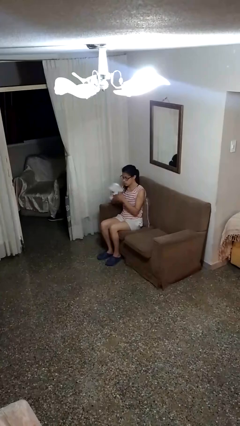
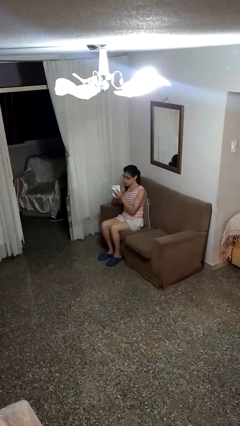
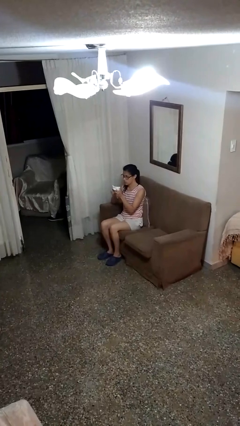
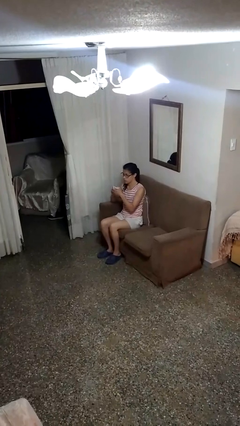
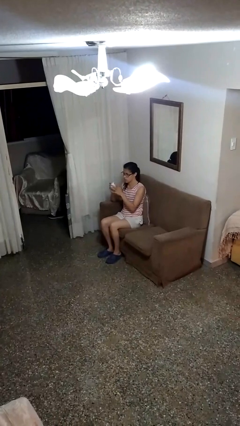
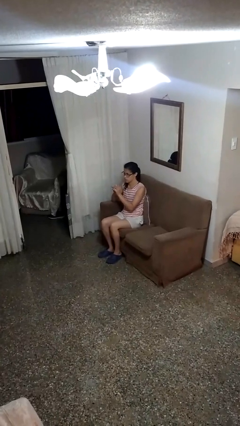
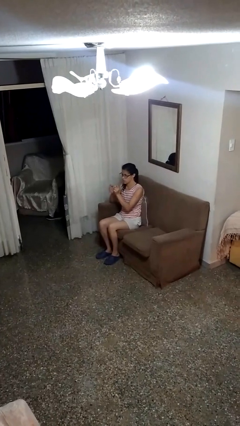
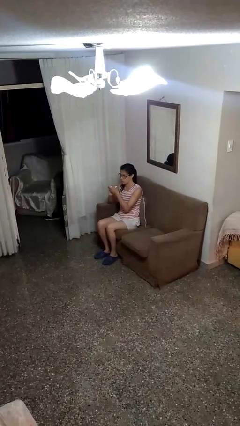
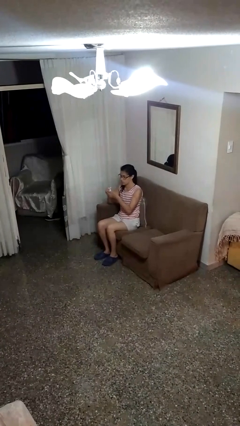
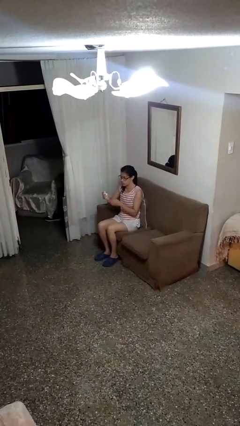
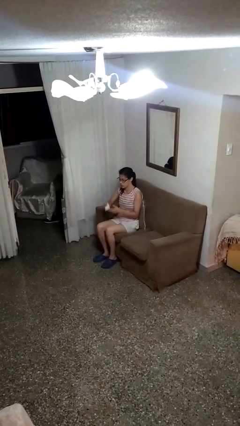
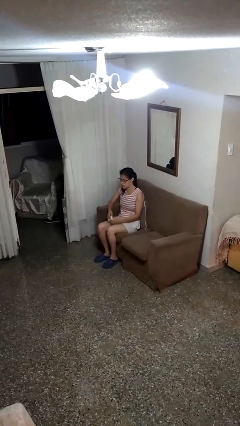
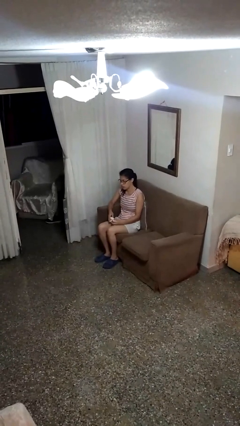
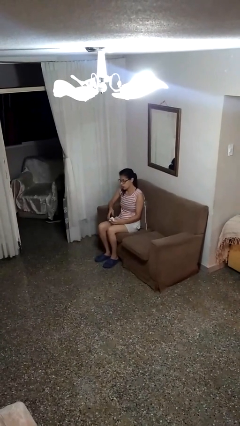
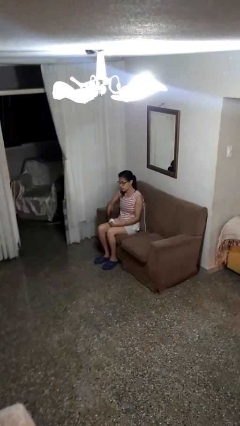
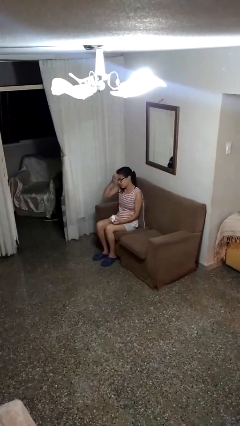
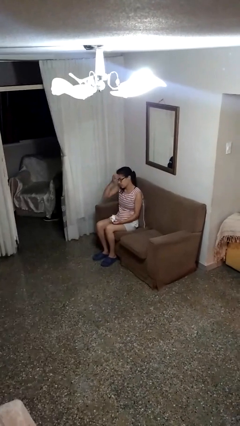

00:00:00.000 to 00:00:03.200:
person crumples paper

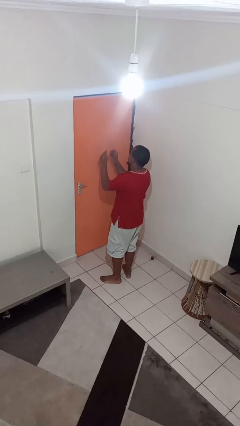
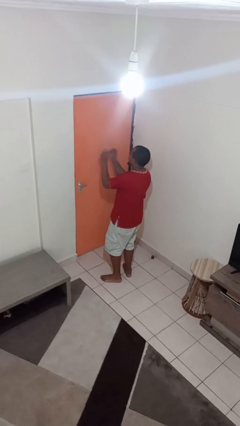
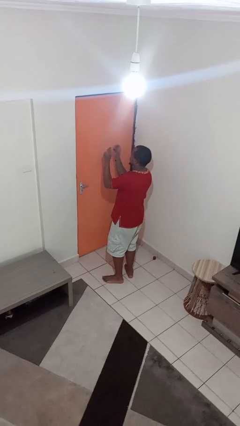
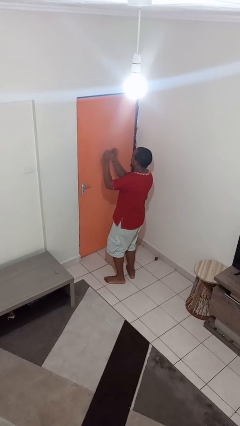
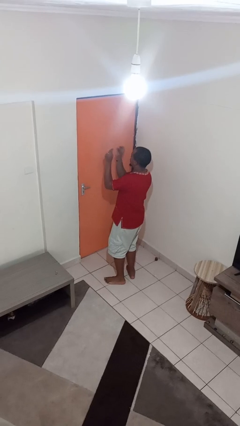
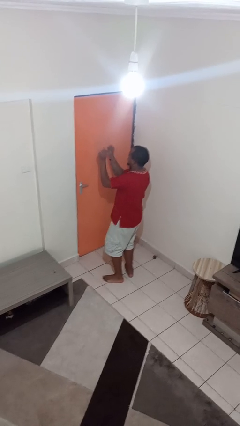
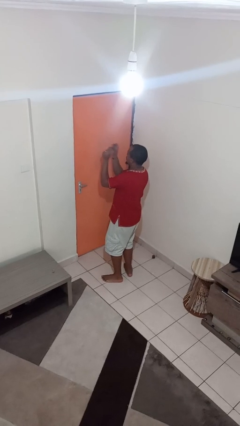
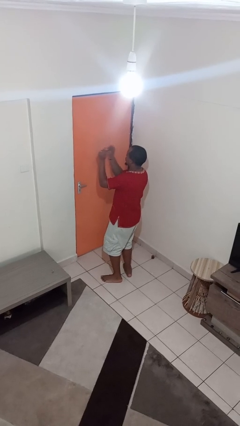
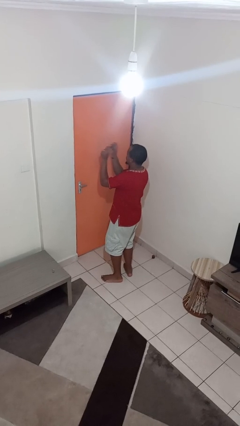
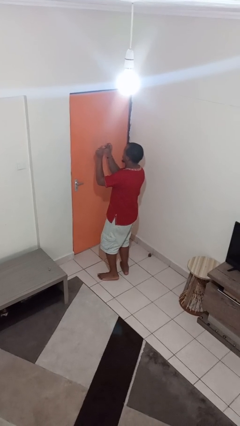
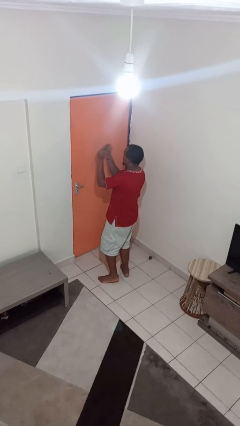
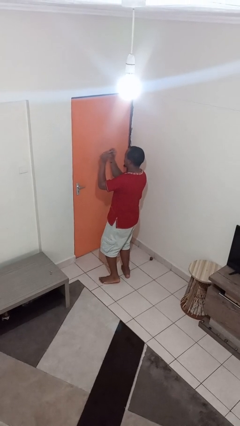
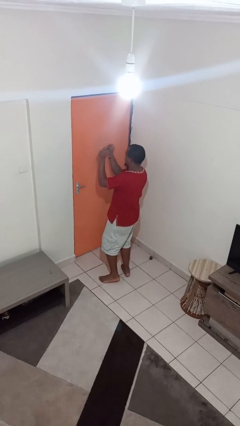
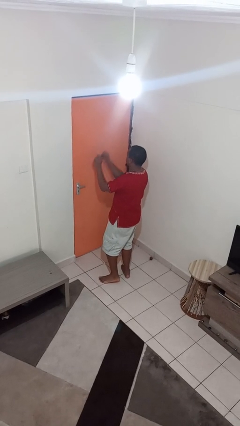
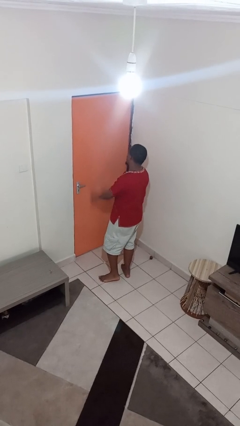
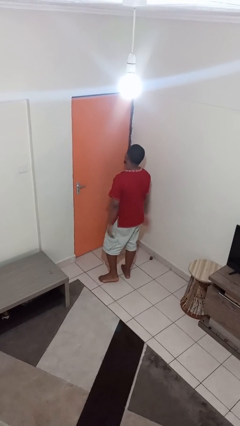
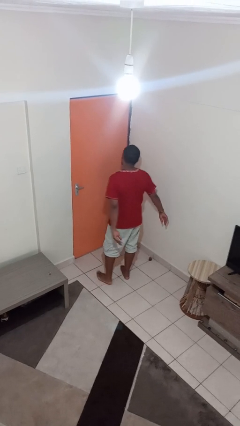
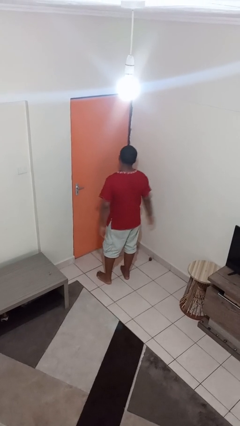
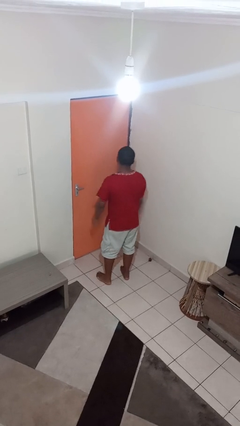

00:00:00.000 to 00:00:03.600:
person snaps fingers

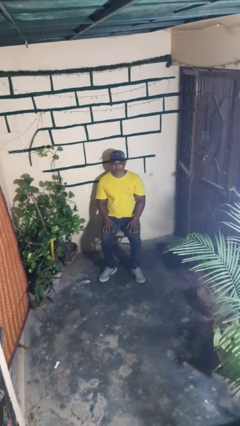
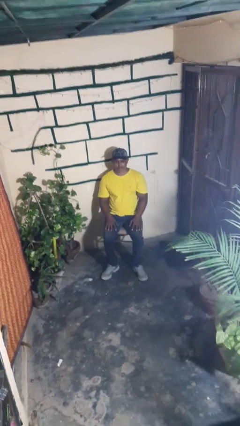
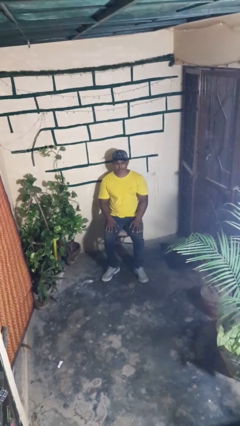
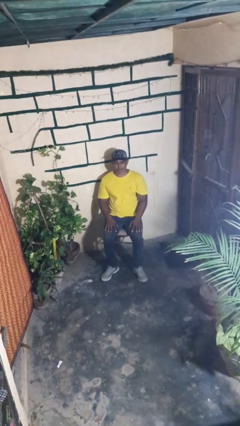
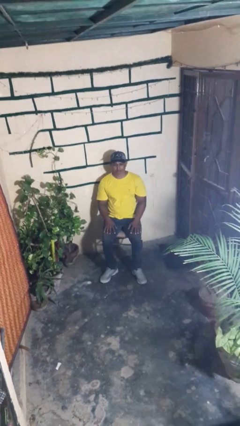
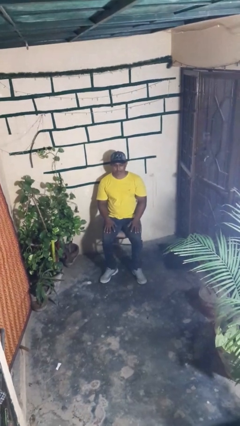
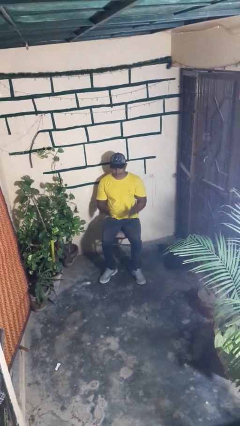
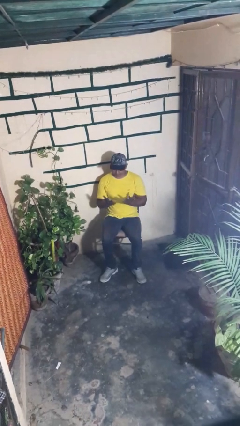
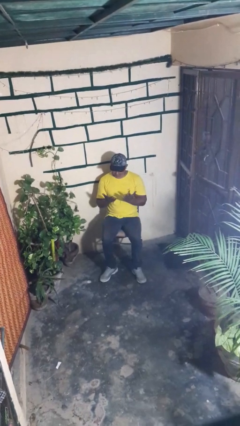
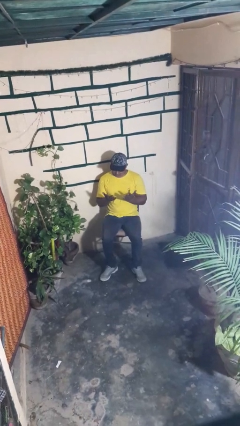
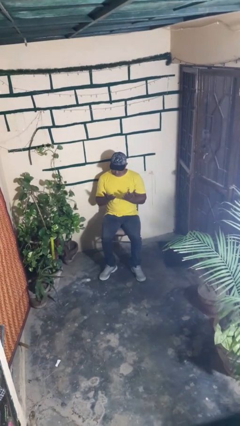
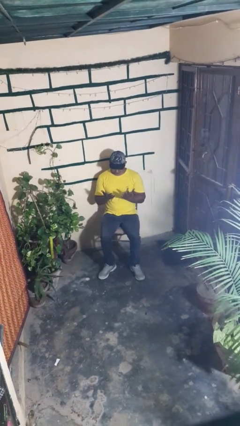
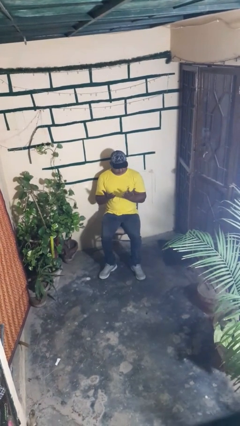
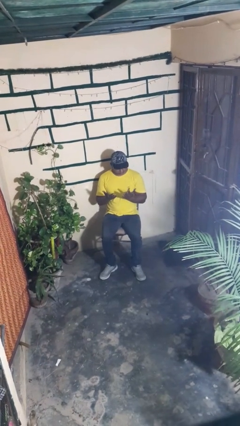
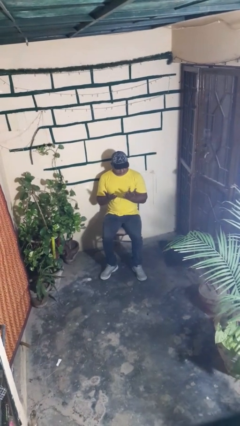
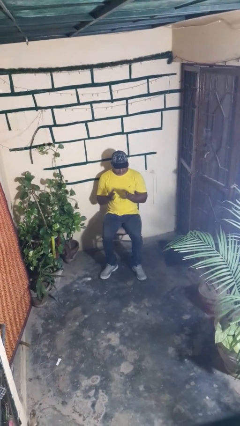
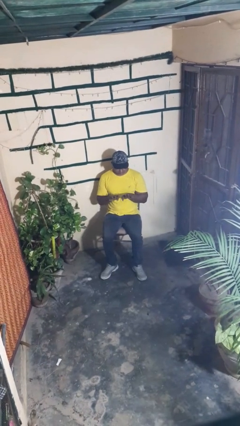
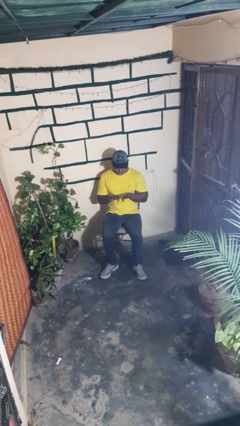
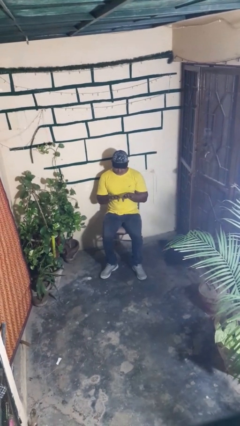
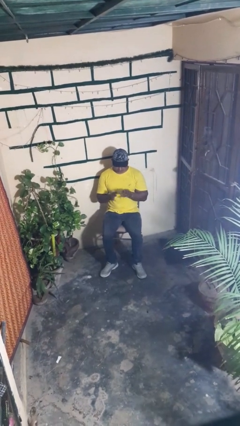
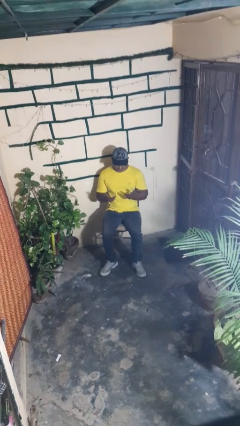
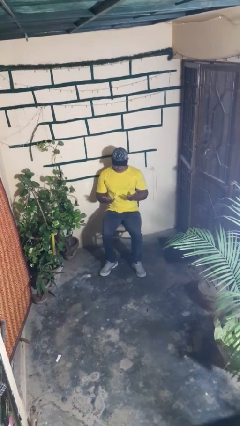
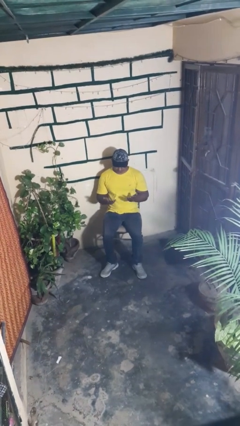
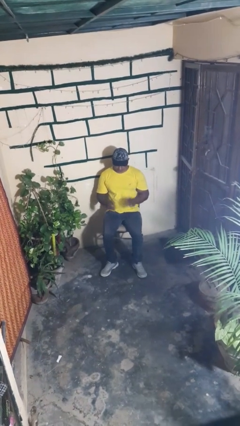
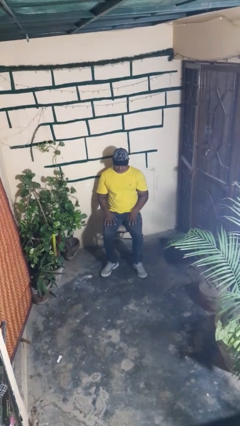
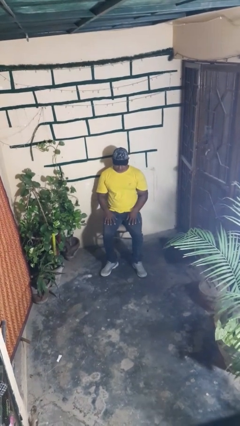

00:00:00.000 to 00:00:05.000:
person looks at hands in lap

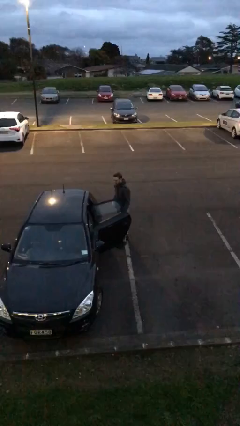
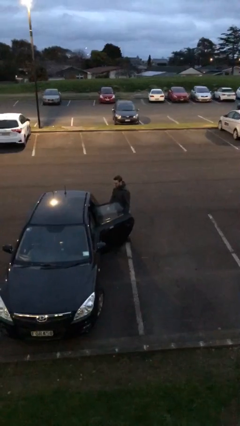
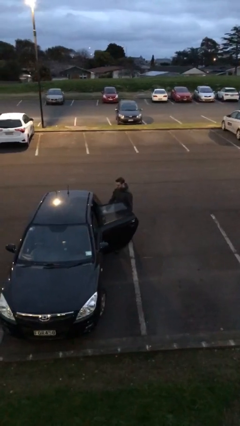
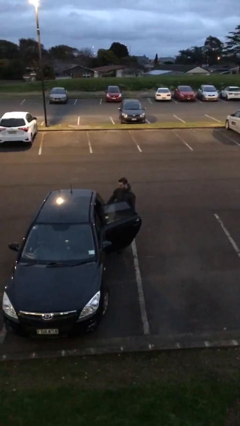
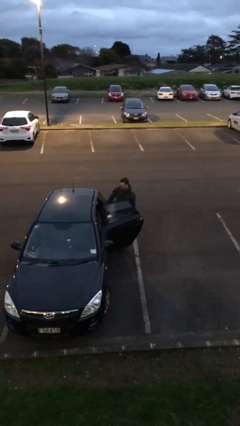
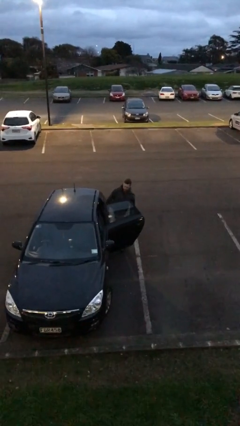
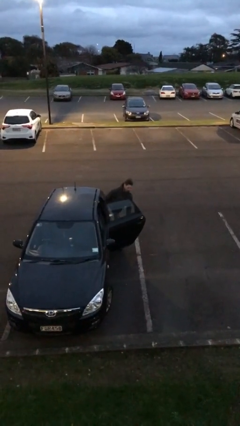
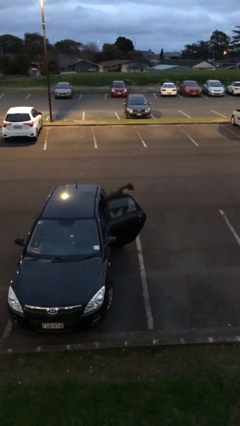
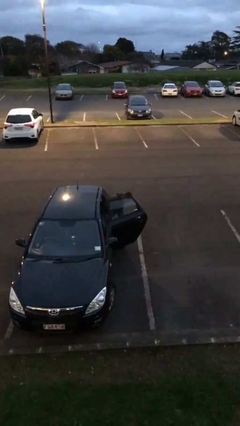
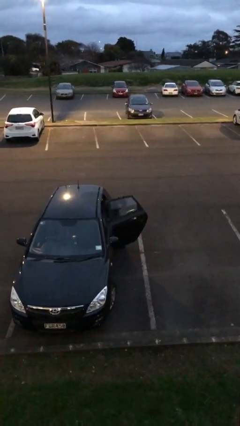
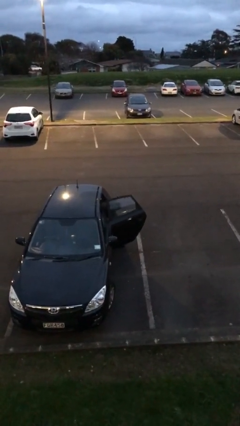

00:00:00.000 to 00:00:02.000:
person enters car

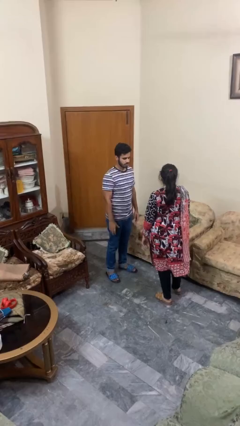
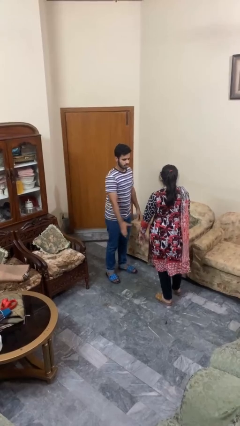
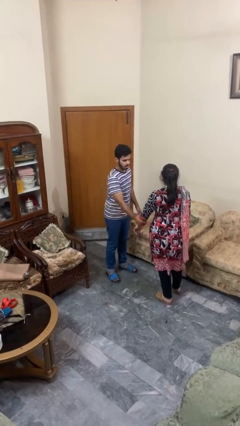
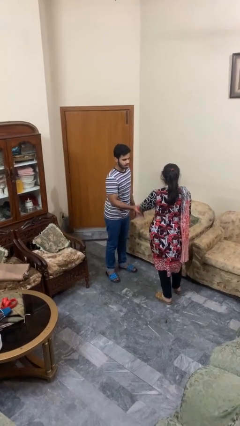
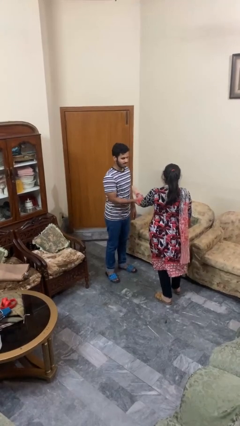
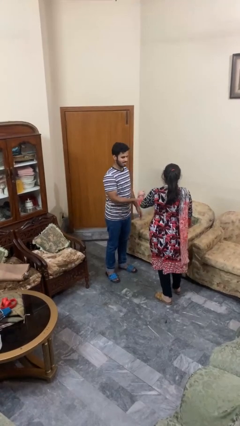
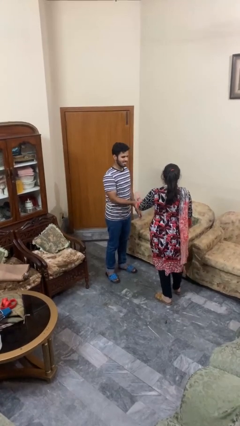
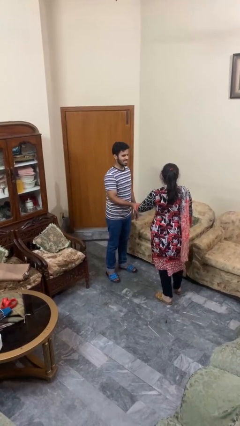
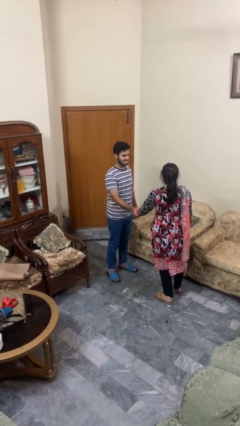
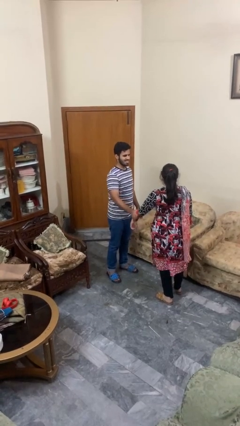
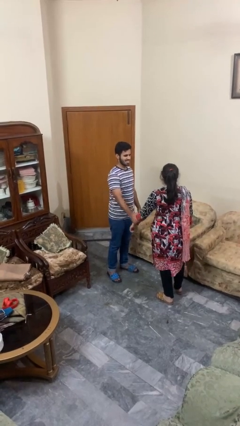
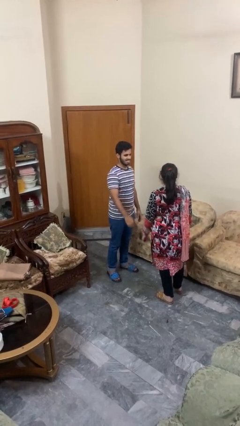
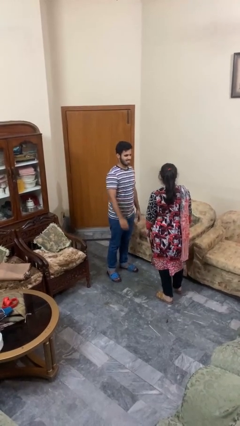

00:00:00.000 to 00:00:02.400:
person grabs person by forearm

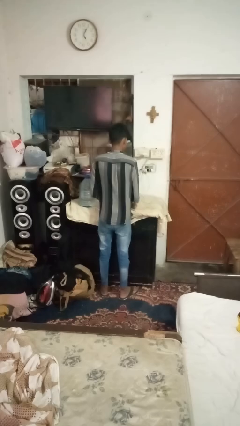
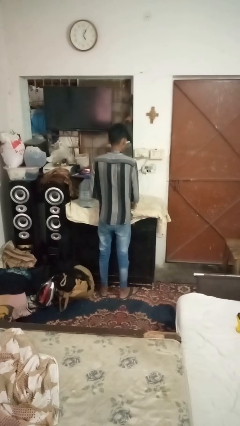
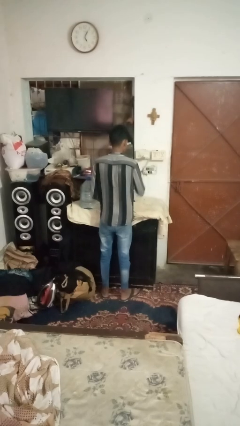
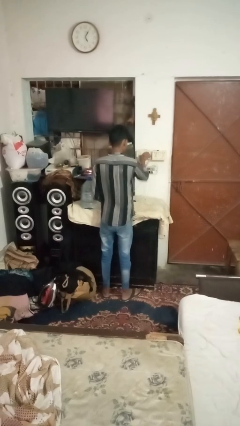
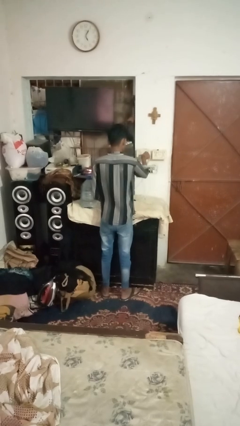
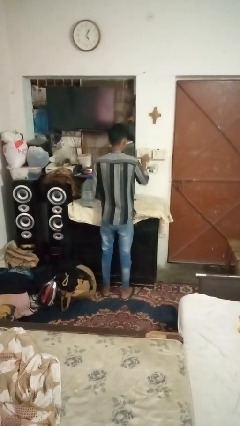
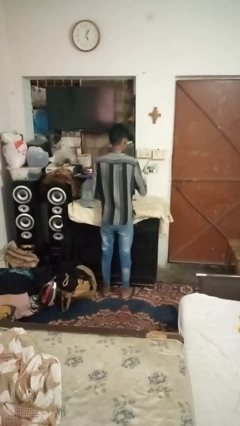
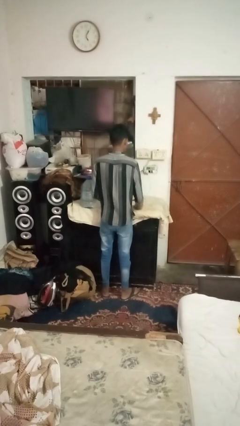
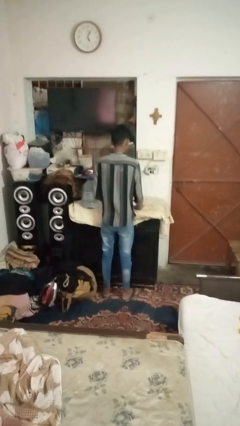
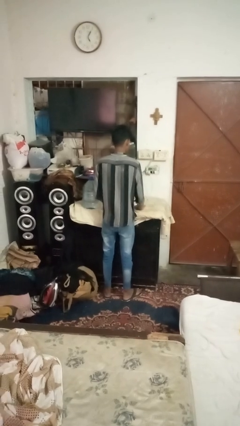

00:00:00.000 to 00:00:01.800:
person unplugs from electrical socket
